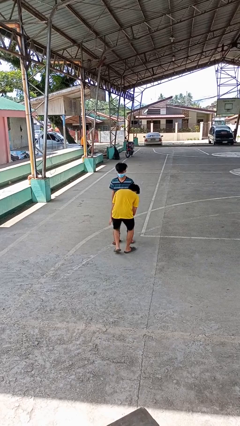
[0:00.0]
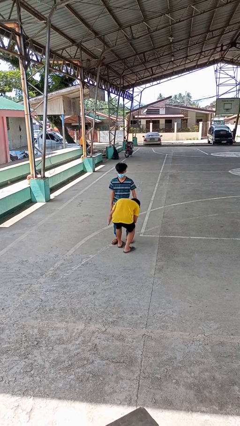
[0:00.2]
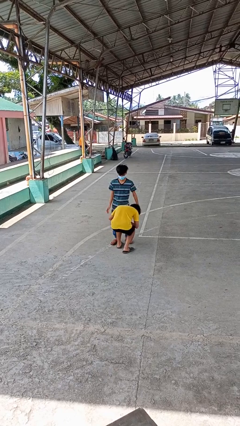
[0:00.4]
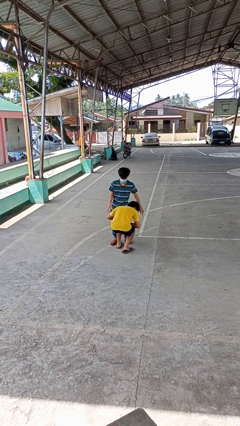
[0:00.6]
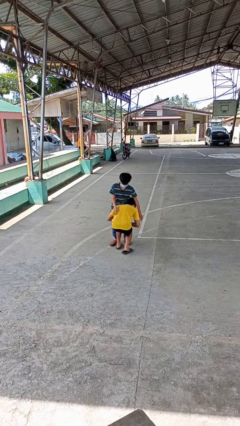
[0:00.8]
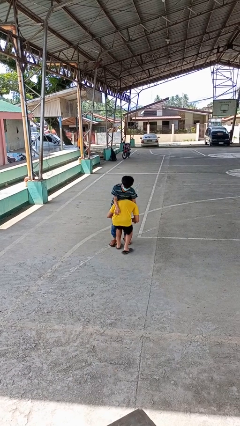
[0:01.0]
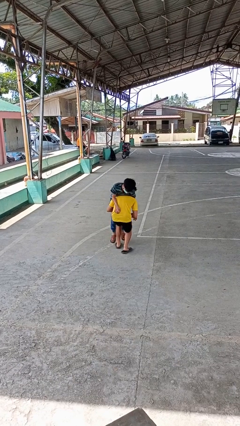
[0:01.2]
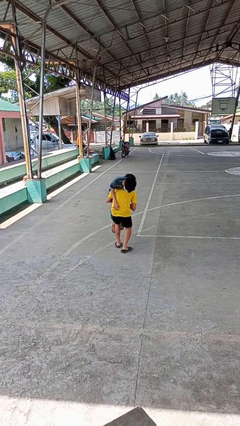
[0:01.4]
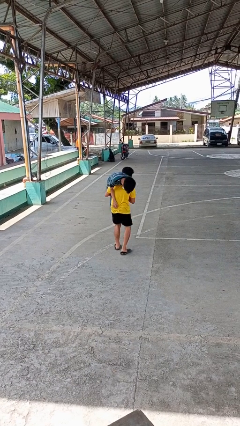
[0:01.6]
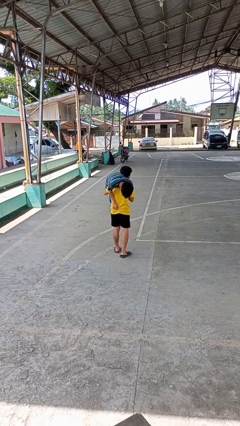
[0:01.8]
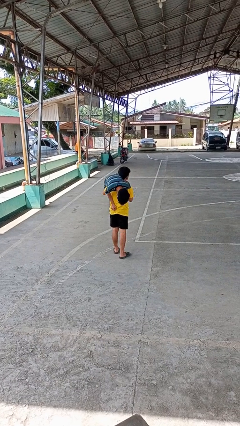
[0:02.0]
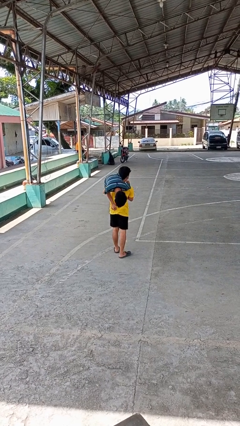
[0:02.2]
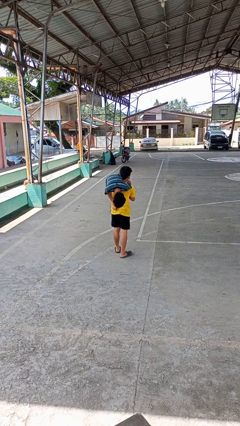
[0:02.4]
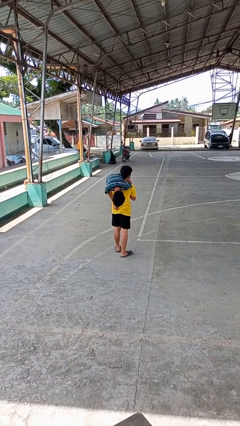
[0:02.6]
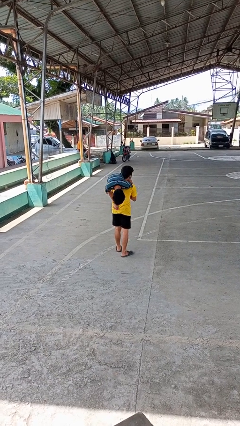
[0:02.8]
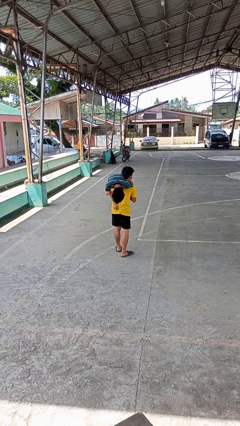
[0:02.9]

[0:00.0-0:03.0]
person carries person over shoulder

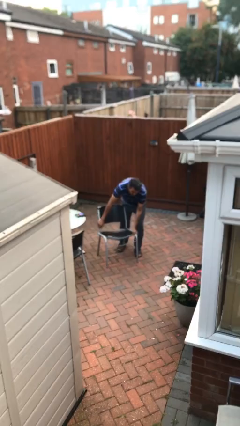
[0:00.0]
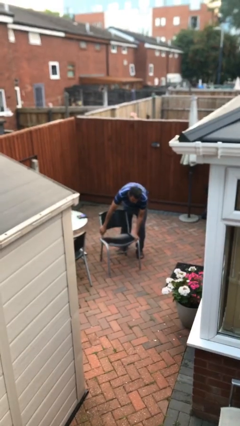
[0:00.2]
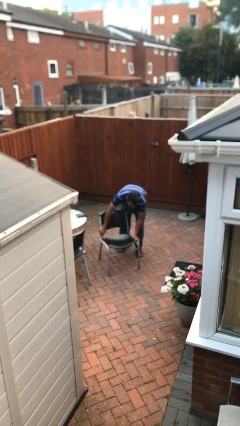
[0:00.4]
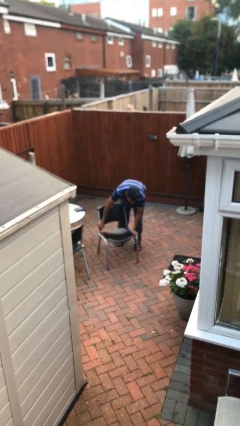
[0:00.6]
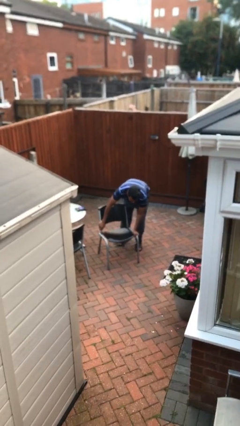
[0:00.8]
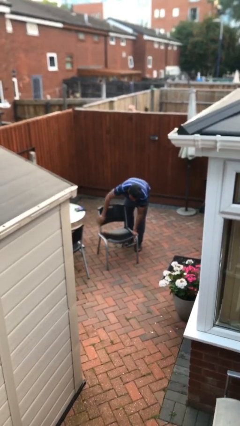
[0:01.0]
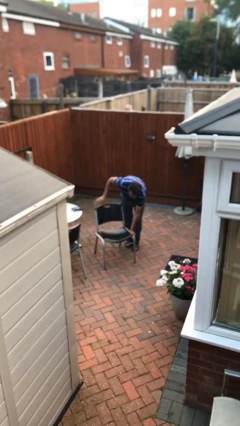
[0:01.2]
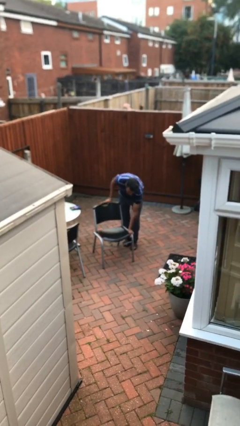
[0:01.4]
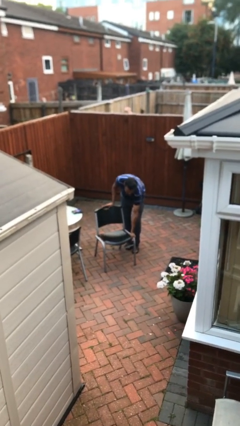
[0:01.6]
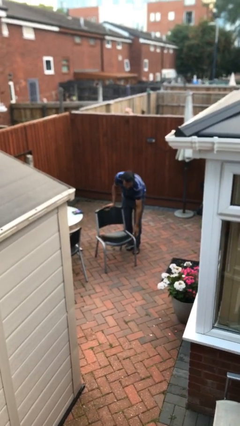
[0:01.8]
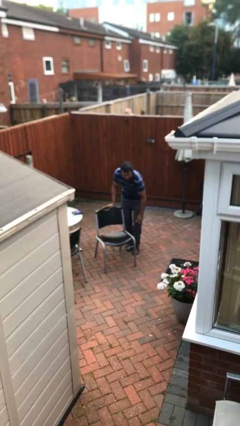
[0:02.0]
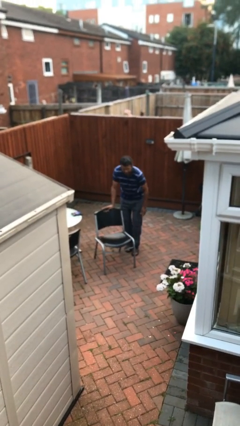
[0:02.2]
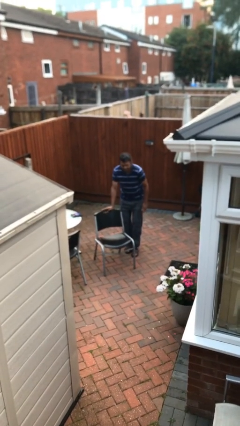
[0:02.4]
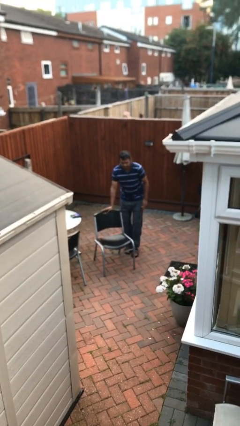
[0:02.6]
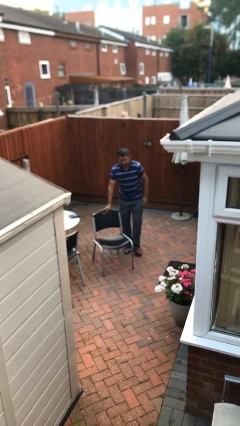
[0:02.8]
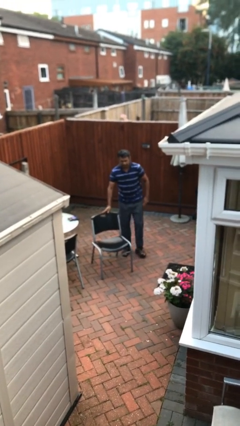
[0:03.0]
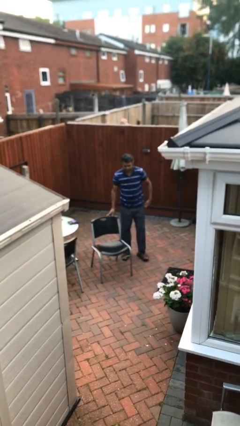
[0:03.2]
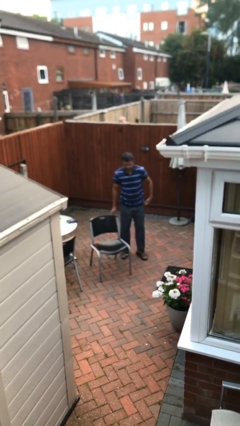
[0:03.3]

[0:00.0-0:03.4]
person puts down object on floor

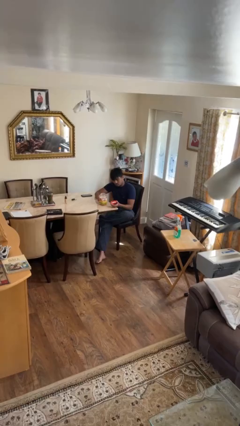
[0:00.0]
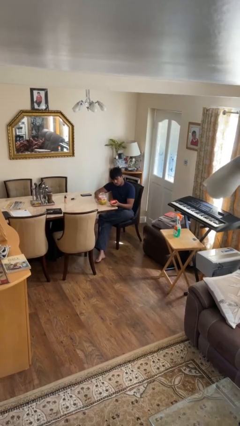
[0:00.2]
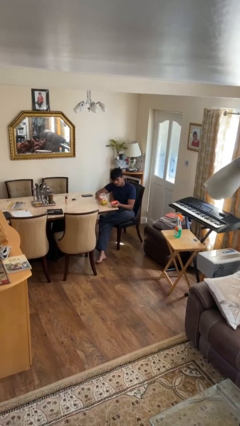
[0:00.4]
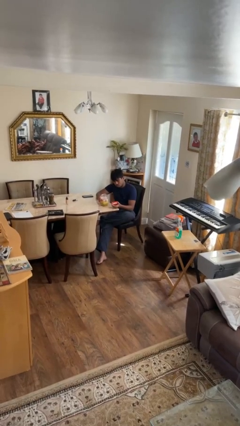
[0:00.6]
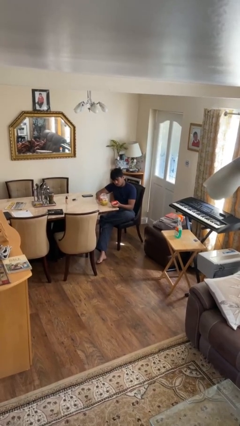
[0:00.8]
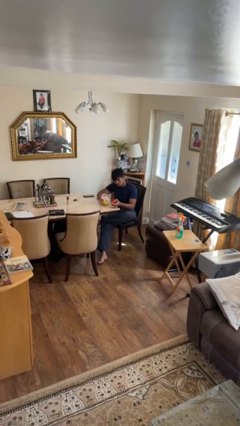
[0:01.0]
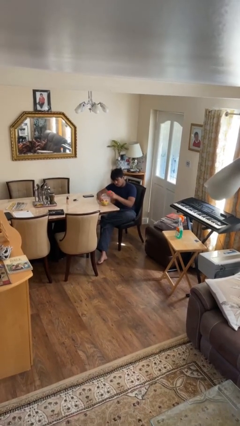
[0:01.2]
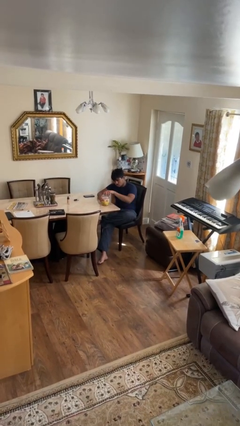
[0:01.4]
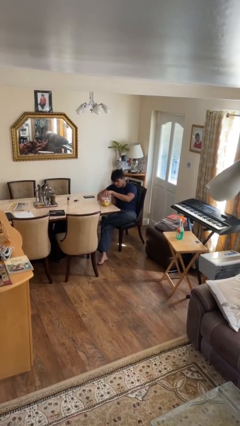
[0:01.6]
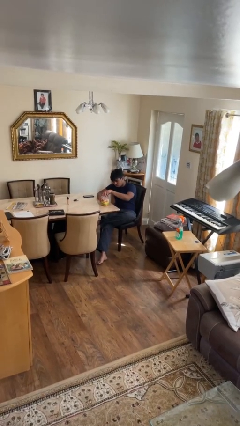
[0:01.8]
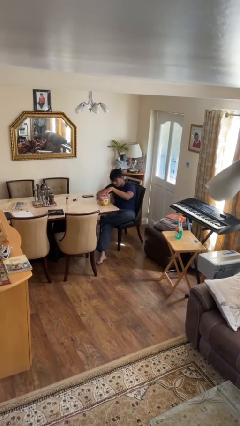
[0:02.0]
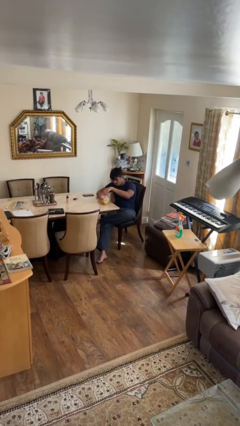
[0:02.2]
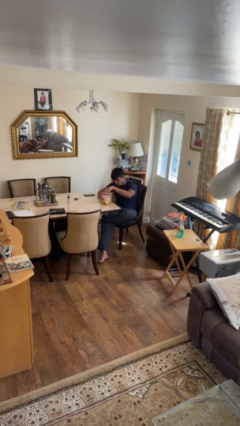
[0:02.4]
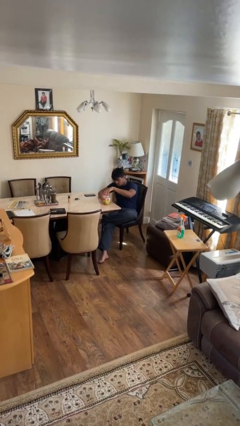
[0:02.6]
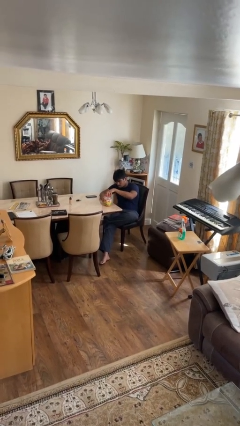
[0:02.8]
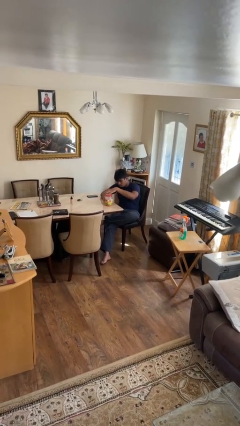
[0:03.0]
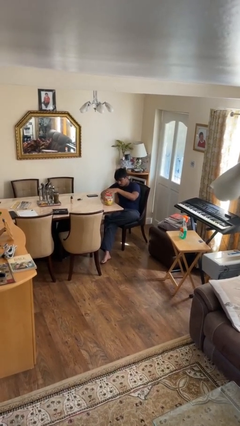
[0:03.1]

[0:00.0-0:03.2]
person closes jar

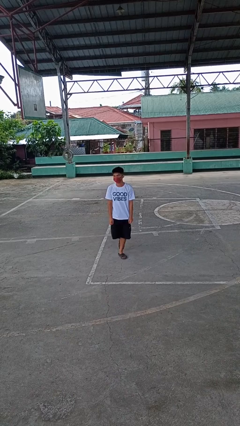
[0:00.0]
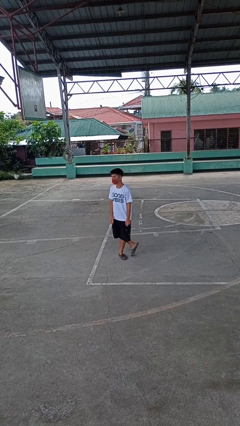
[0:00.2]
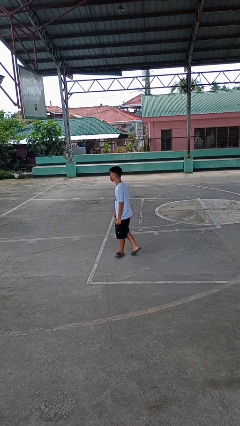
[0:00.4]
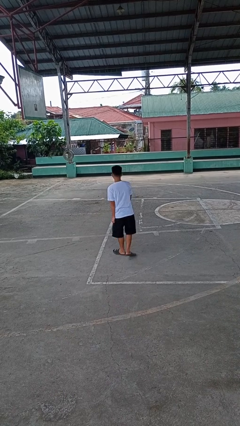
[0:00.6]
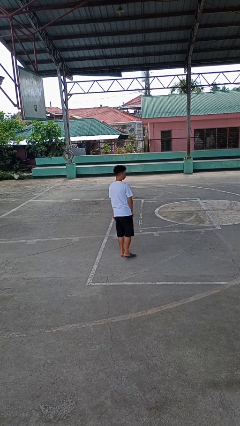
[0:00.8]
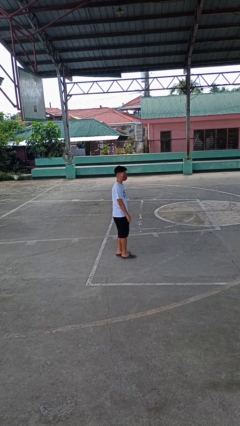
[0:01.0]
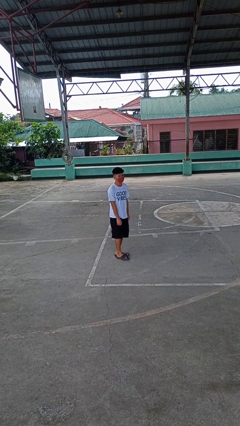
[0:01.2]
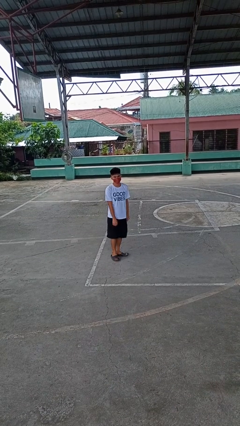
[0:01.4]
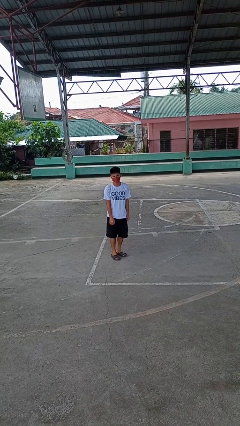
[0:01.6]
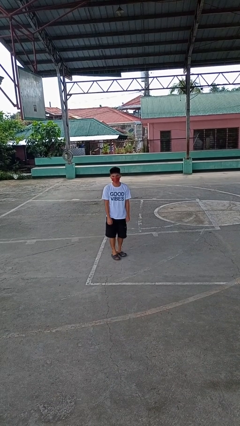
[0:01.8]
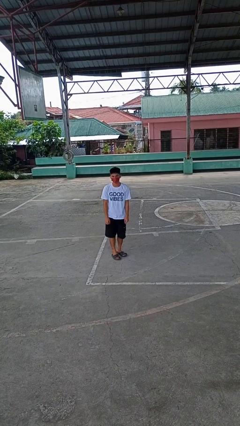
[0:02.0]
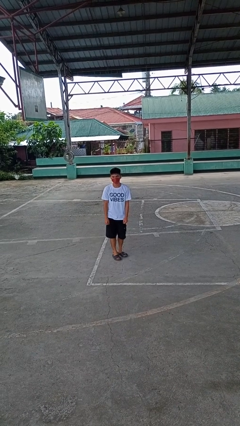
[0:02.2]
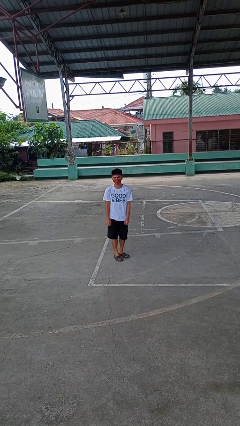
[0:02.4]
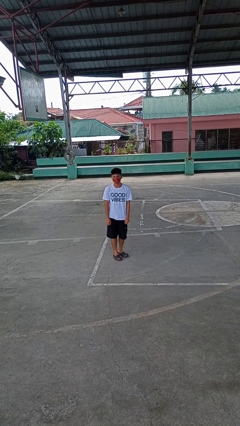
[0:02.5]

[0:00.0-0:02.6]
person twirls

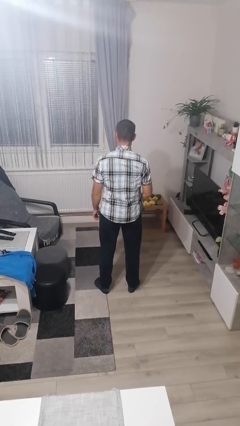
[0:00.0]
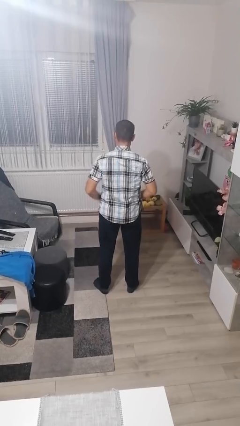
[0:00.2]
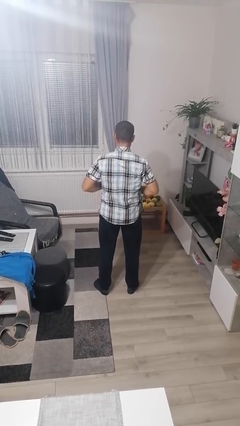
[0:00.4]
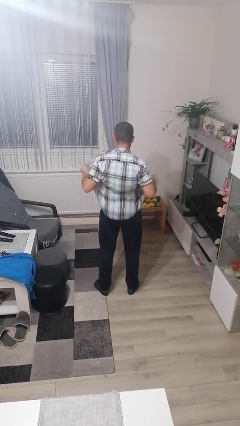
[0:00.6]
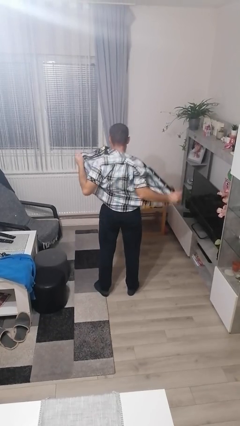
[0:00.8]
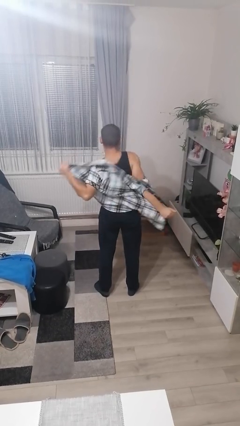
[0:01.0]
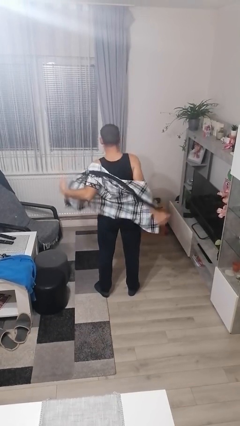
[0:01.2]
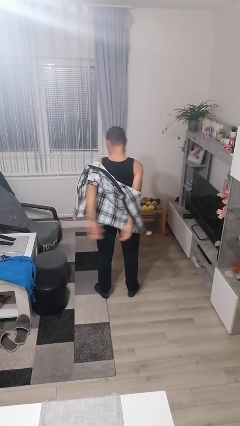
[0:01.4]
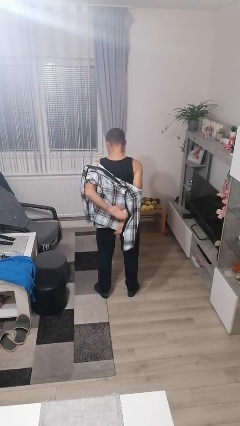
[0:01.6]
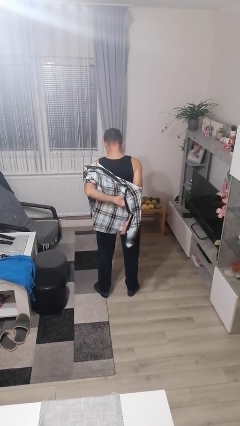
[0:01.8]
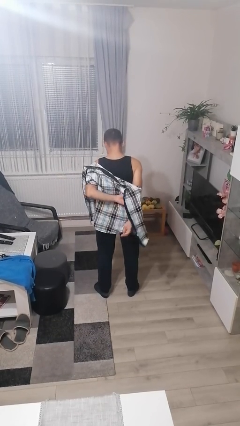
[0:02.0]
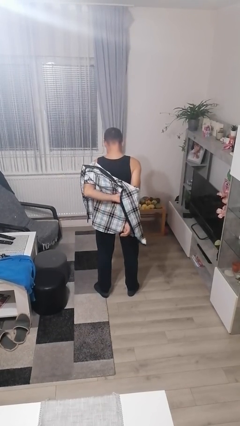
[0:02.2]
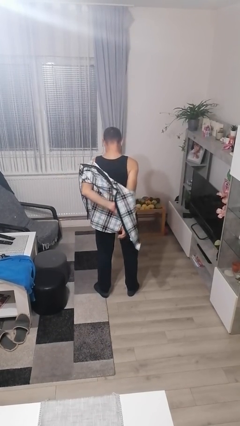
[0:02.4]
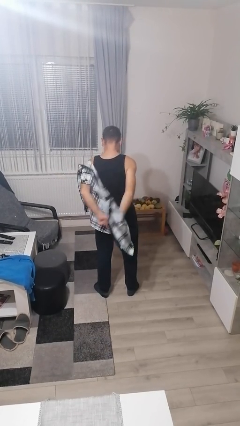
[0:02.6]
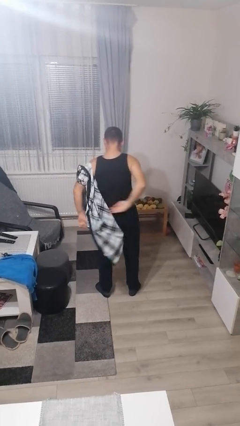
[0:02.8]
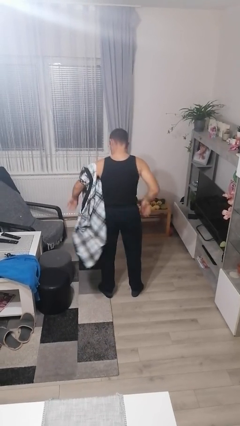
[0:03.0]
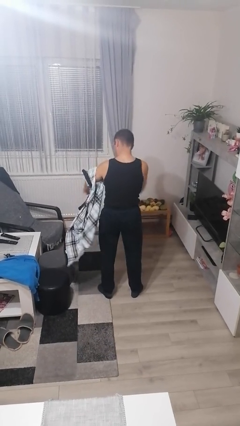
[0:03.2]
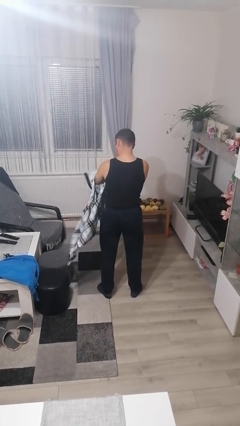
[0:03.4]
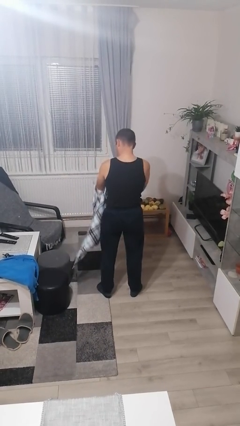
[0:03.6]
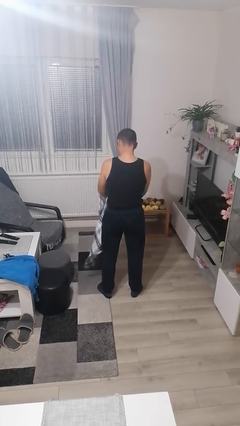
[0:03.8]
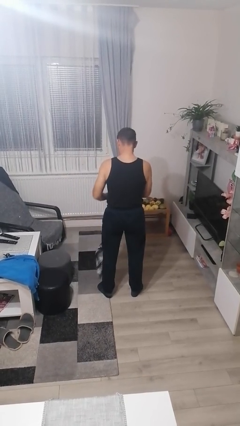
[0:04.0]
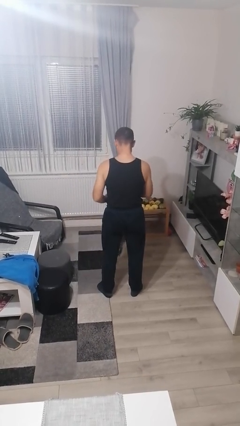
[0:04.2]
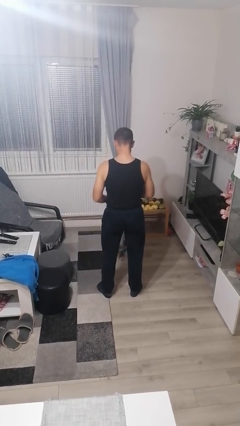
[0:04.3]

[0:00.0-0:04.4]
person takes off shirt

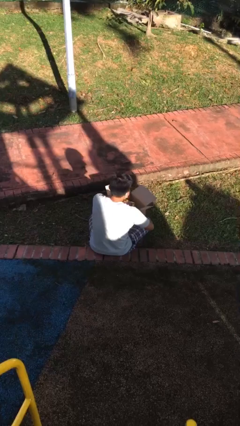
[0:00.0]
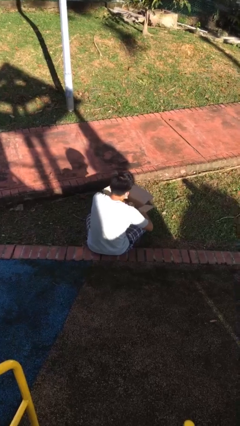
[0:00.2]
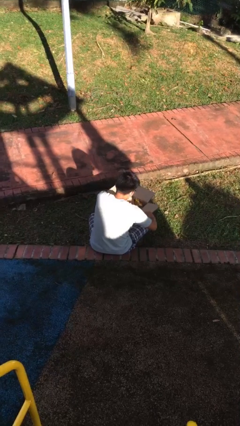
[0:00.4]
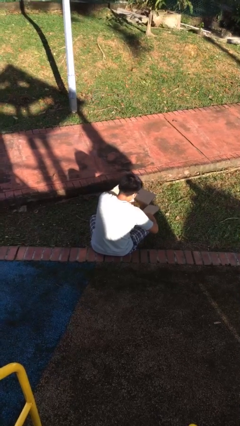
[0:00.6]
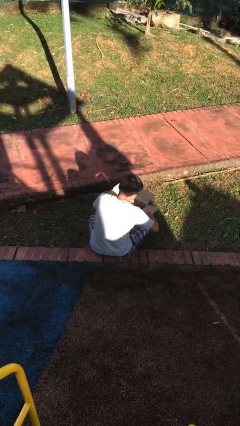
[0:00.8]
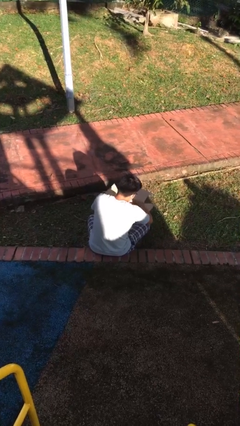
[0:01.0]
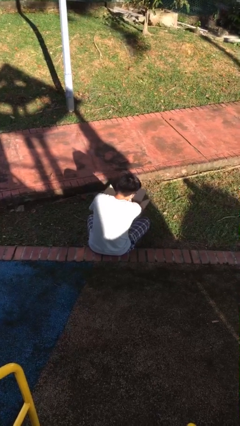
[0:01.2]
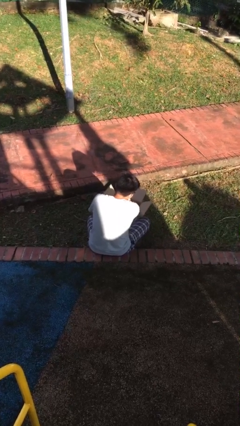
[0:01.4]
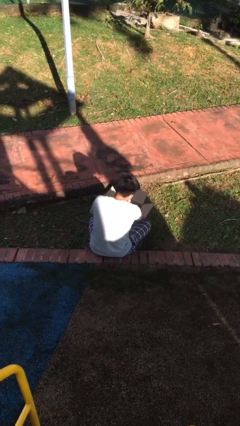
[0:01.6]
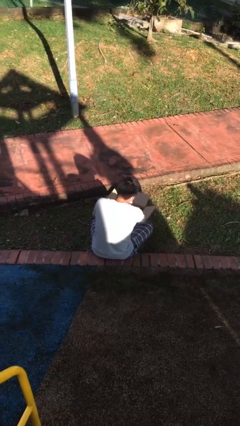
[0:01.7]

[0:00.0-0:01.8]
person searches in box
